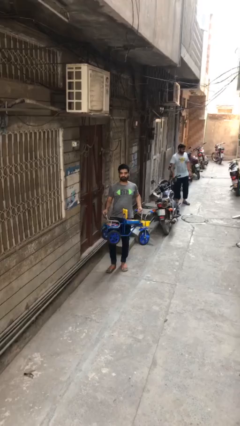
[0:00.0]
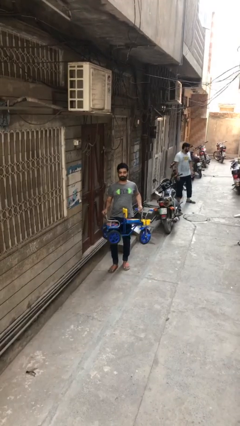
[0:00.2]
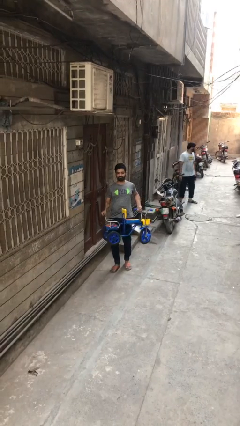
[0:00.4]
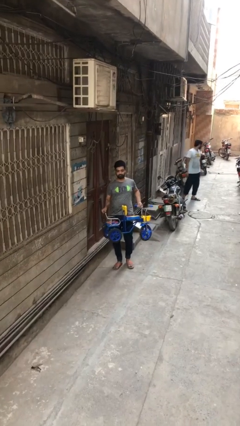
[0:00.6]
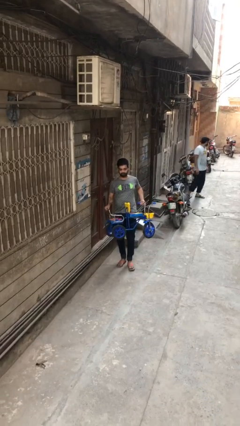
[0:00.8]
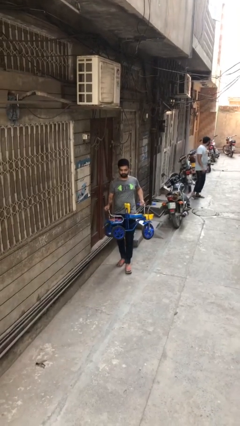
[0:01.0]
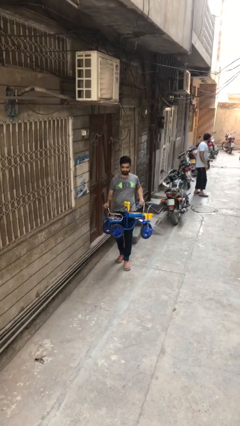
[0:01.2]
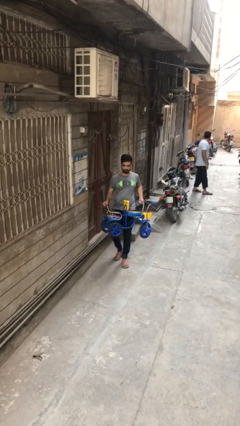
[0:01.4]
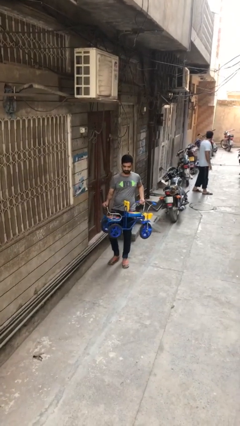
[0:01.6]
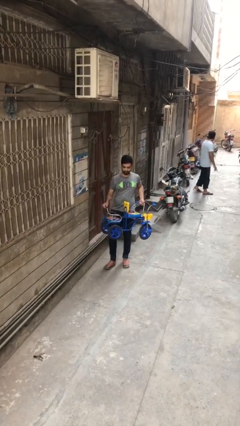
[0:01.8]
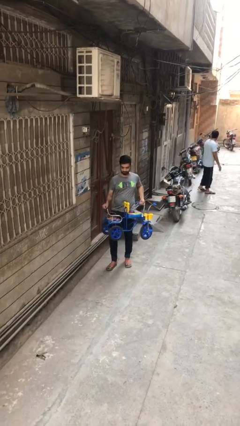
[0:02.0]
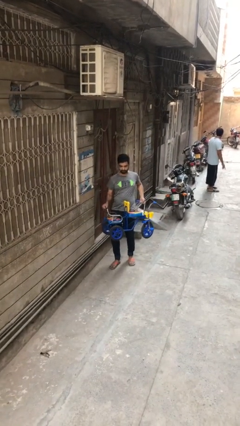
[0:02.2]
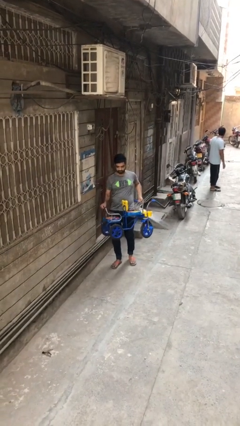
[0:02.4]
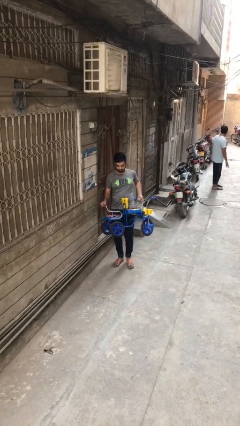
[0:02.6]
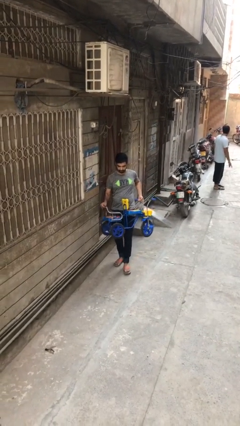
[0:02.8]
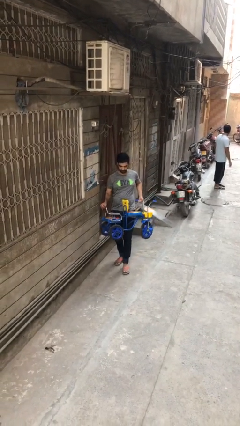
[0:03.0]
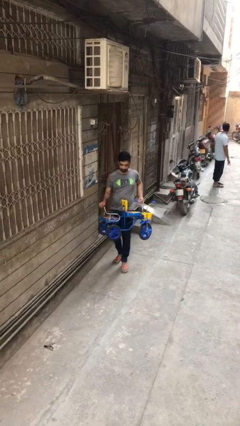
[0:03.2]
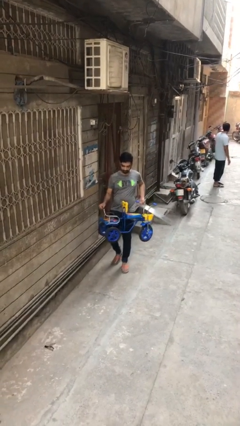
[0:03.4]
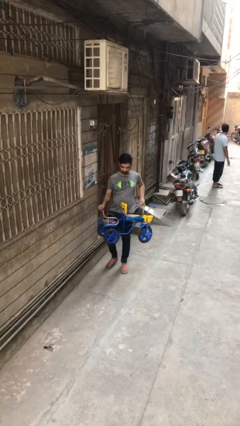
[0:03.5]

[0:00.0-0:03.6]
person carries heavy object

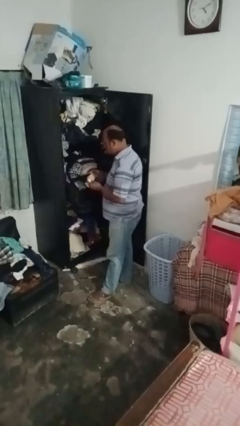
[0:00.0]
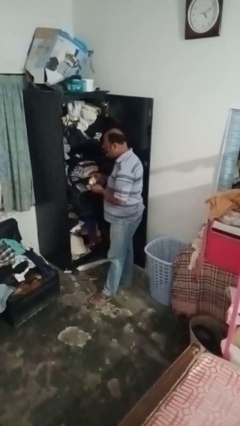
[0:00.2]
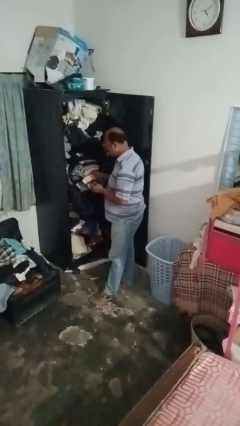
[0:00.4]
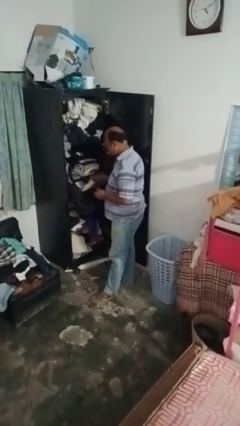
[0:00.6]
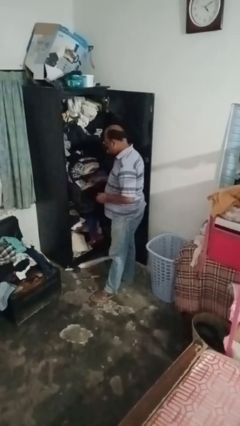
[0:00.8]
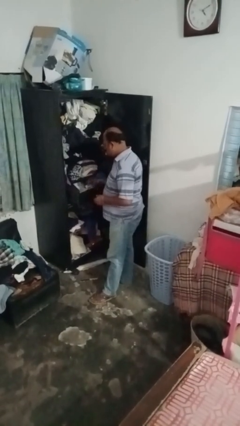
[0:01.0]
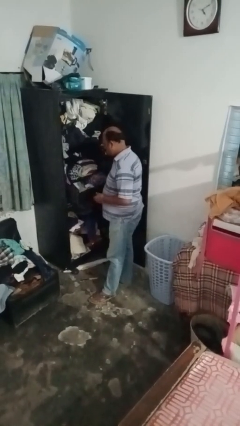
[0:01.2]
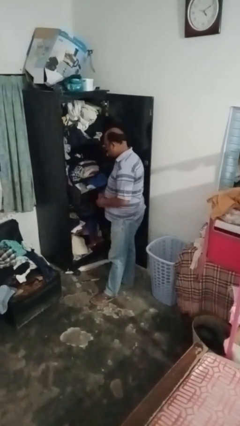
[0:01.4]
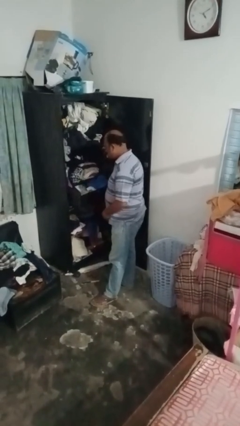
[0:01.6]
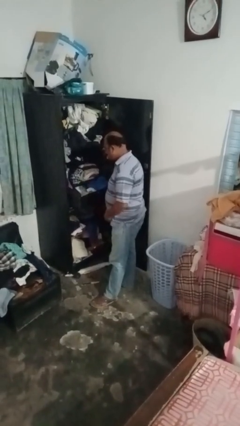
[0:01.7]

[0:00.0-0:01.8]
person takes clothes from dresser

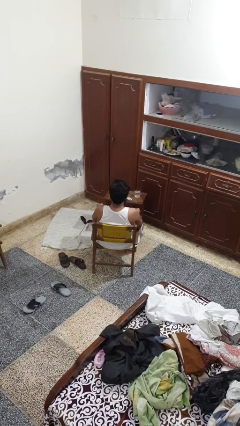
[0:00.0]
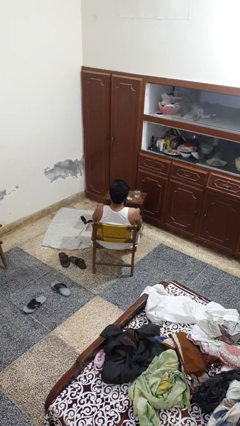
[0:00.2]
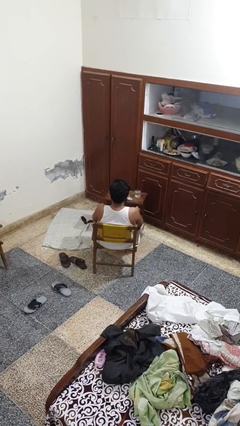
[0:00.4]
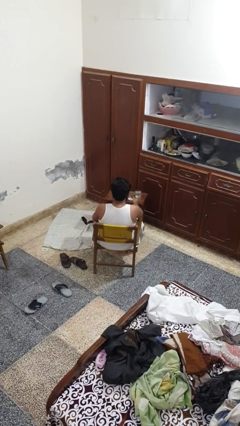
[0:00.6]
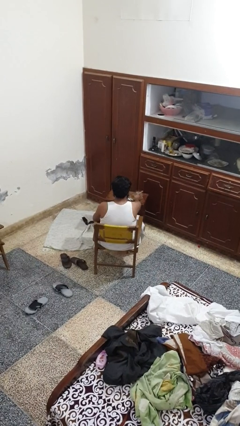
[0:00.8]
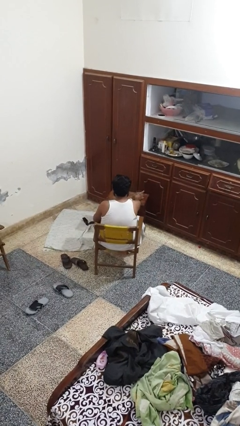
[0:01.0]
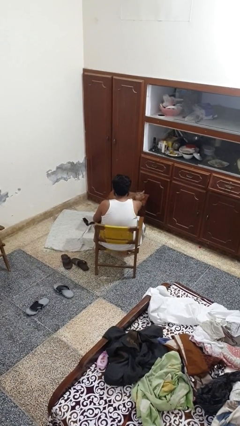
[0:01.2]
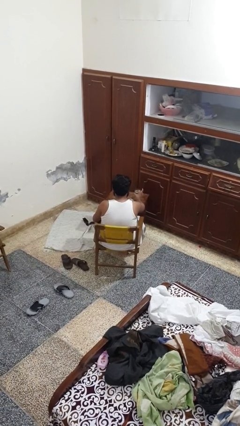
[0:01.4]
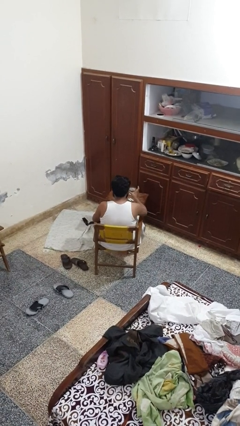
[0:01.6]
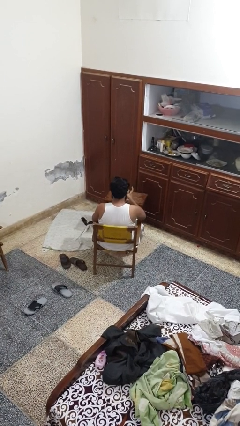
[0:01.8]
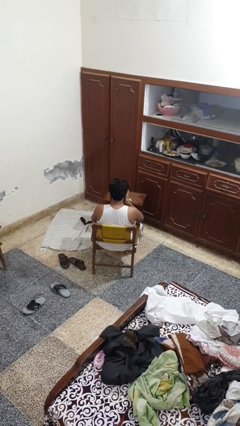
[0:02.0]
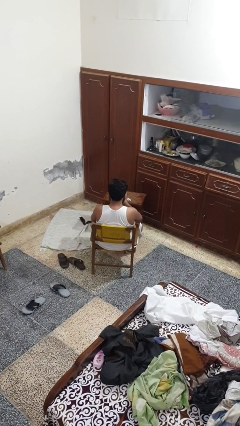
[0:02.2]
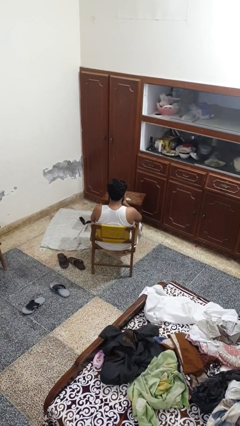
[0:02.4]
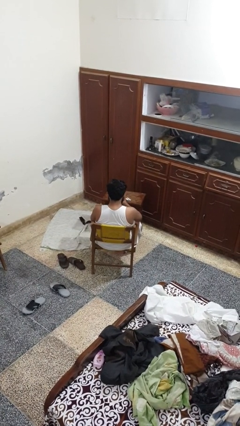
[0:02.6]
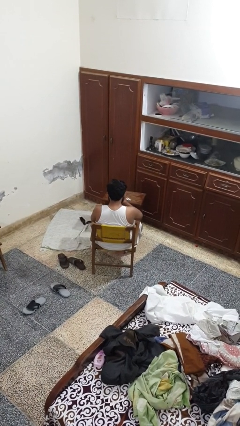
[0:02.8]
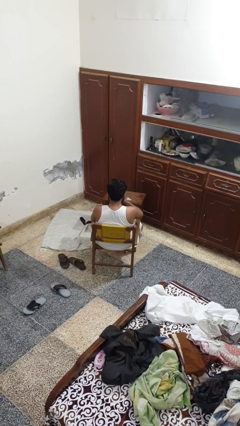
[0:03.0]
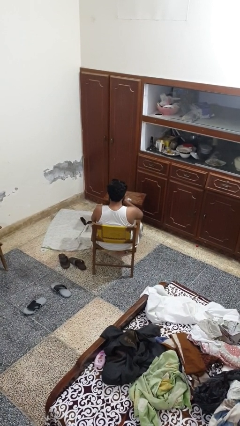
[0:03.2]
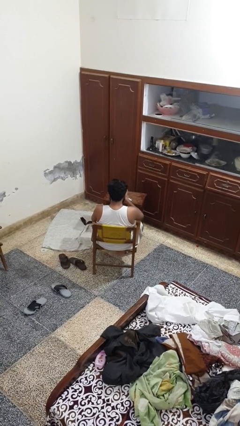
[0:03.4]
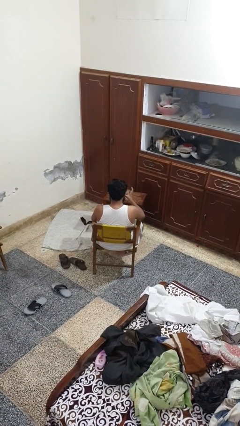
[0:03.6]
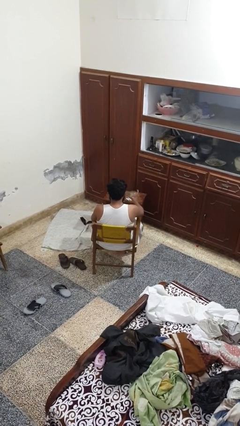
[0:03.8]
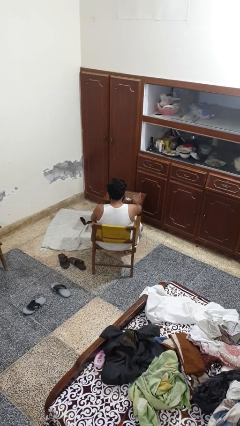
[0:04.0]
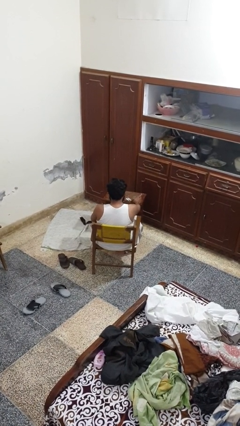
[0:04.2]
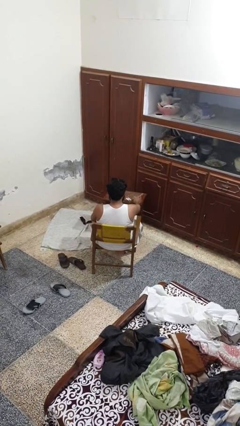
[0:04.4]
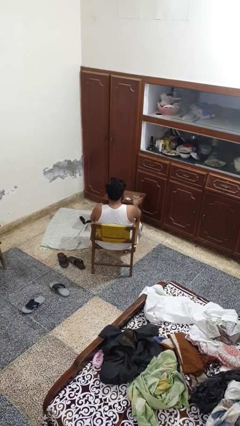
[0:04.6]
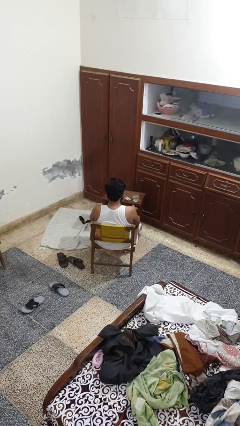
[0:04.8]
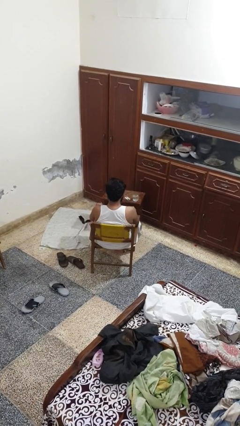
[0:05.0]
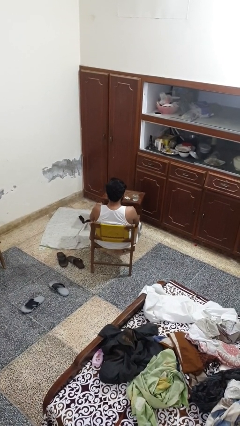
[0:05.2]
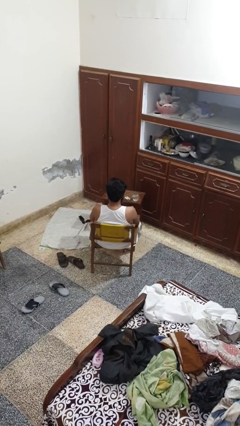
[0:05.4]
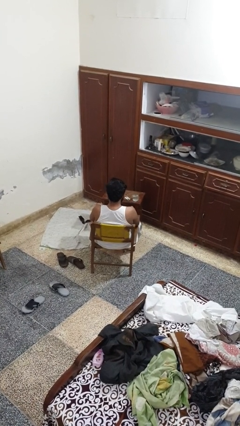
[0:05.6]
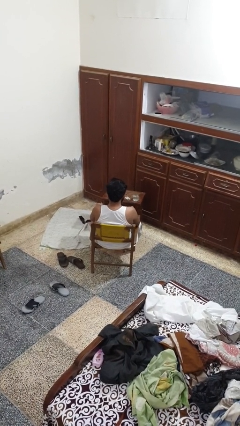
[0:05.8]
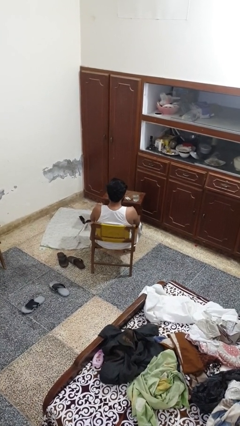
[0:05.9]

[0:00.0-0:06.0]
person drinks from cup

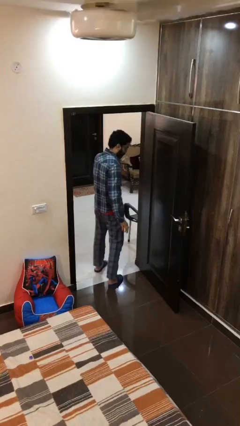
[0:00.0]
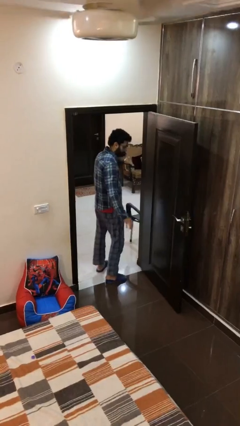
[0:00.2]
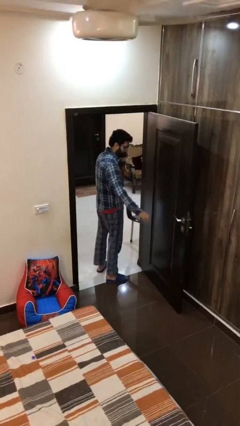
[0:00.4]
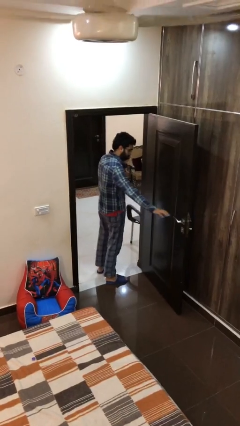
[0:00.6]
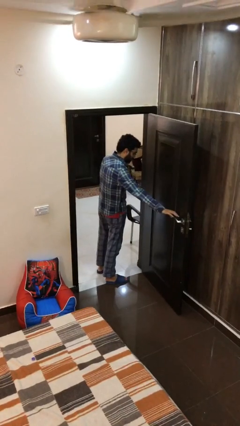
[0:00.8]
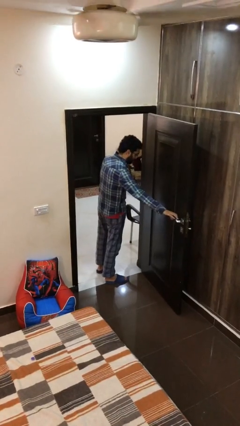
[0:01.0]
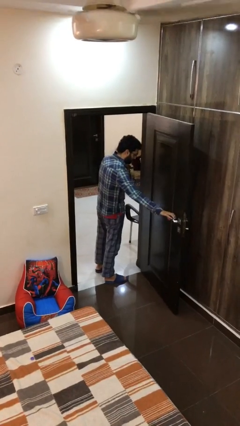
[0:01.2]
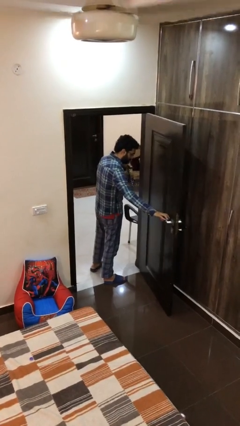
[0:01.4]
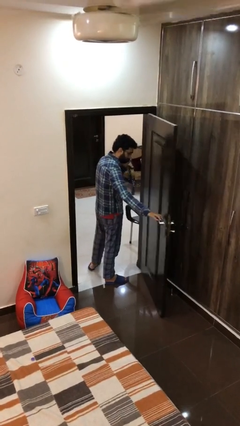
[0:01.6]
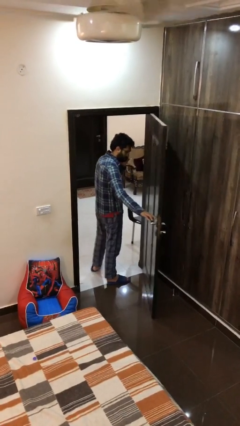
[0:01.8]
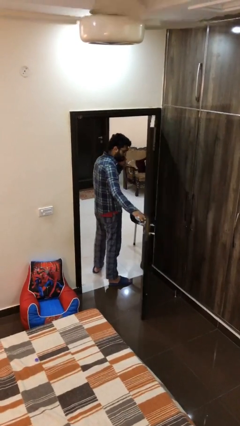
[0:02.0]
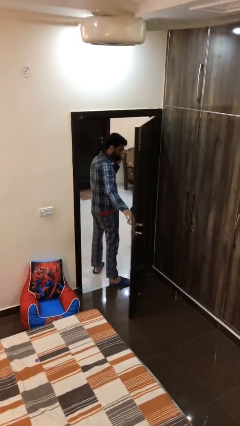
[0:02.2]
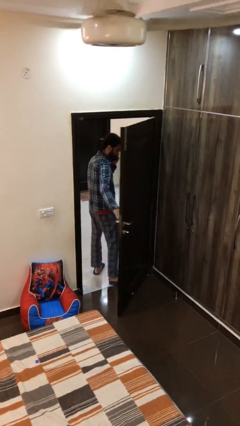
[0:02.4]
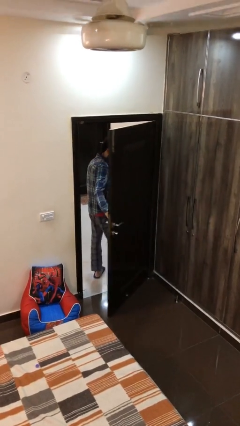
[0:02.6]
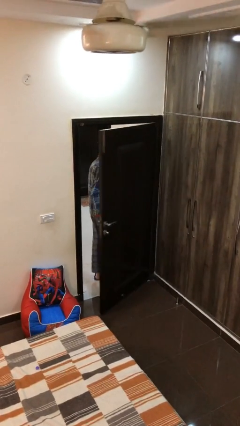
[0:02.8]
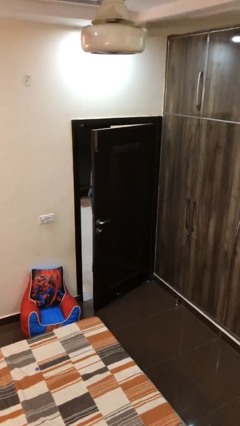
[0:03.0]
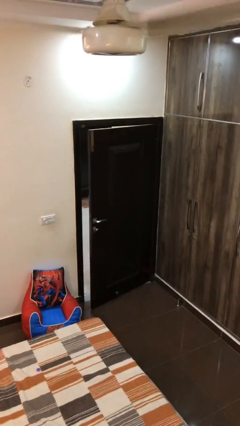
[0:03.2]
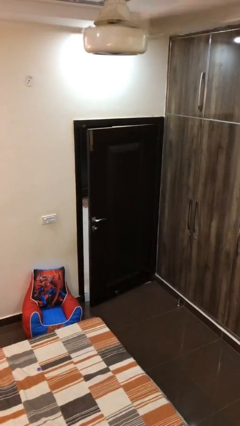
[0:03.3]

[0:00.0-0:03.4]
person closes facility door

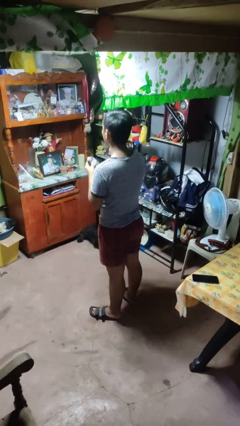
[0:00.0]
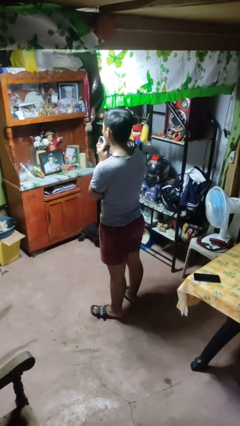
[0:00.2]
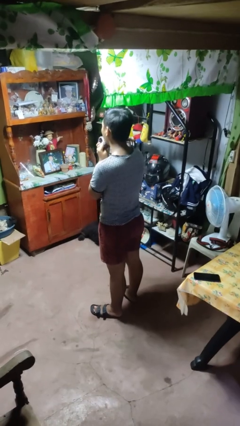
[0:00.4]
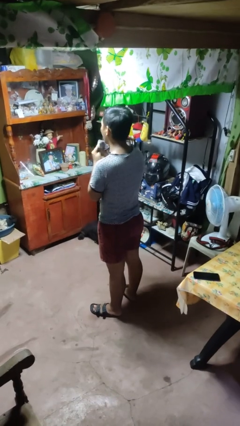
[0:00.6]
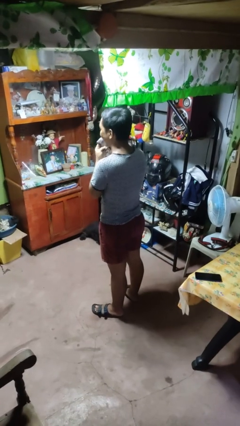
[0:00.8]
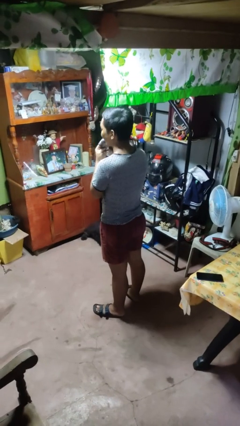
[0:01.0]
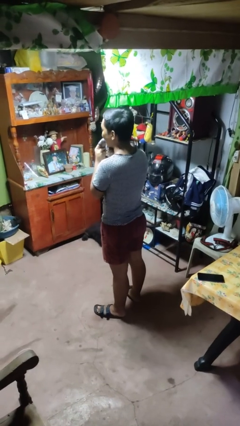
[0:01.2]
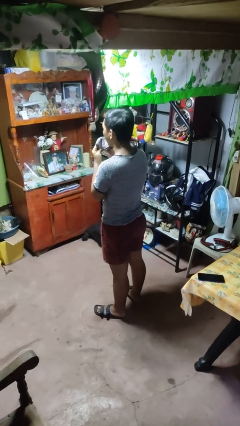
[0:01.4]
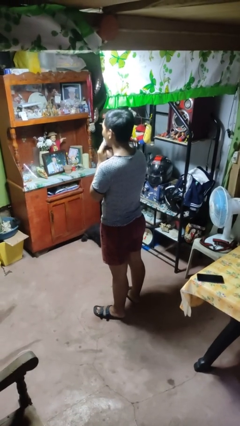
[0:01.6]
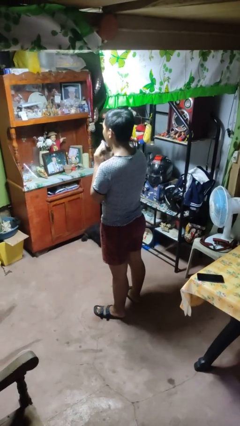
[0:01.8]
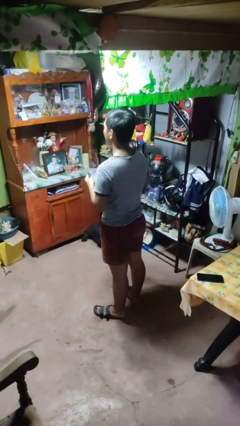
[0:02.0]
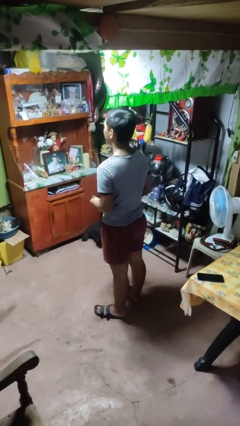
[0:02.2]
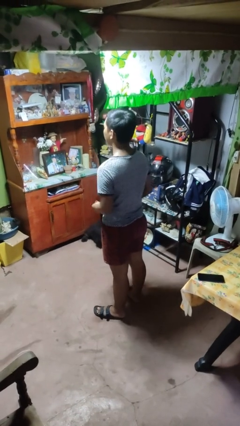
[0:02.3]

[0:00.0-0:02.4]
person wipes mouth with napkin
